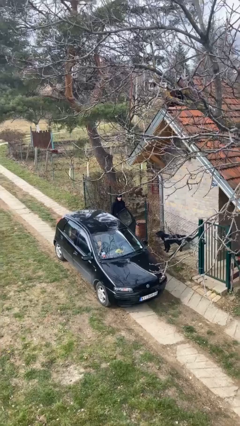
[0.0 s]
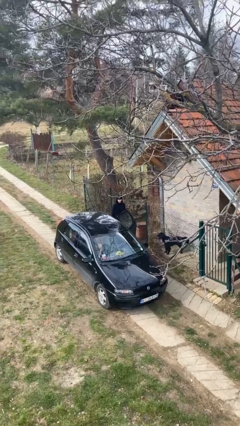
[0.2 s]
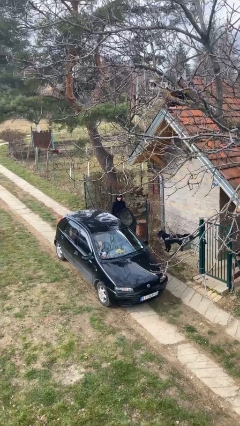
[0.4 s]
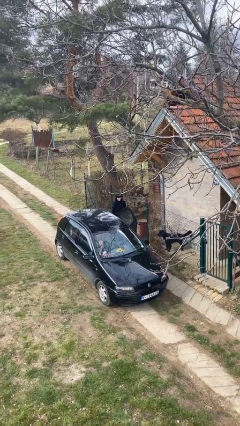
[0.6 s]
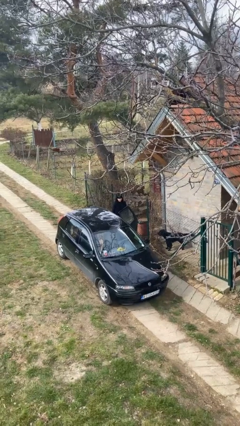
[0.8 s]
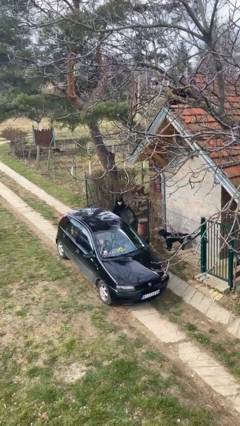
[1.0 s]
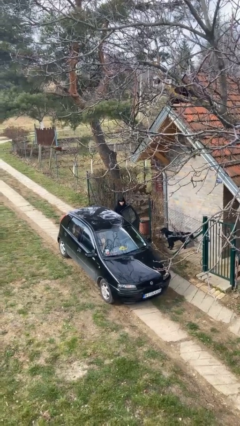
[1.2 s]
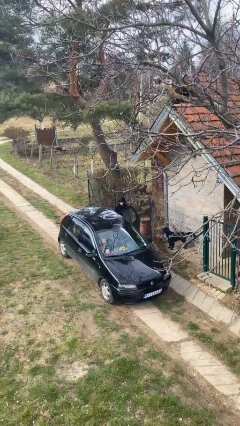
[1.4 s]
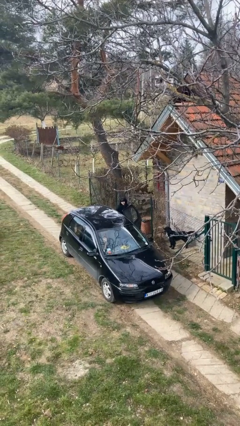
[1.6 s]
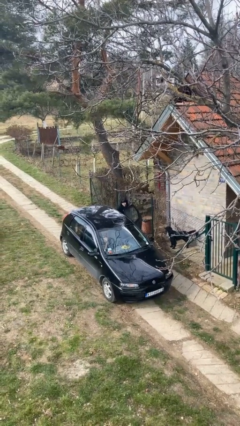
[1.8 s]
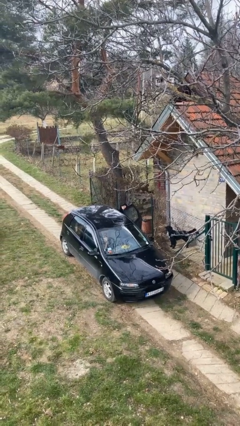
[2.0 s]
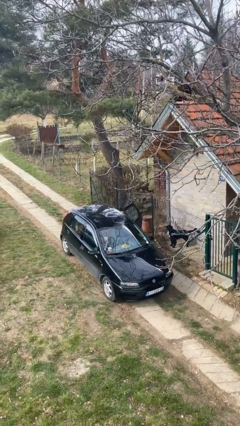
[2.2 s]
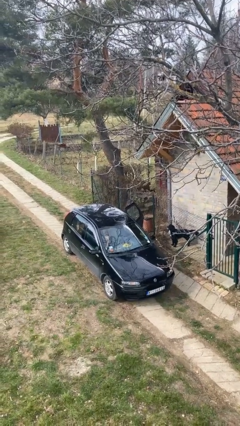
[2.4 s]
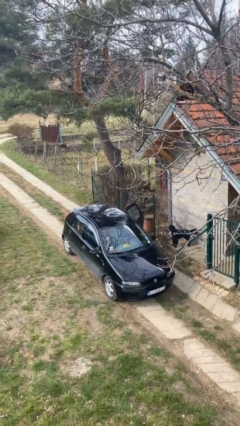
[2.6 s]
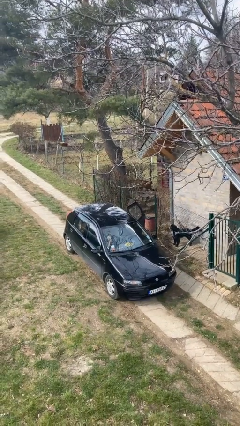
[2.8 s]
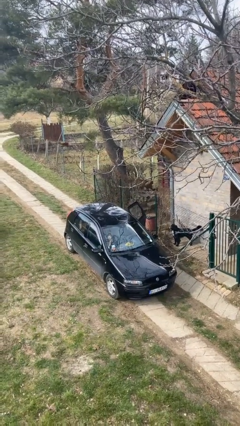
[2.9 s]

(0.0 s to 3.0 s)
person enters car

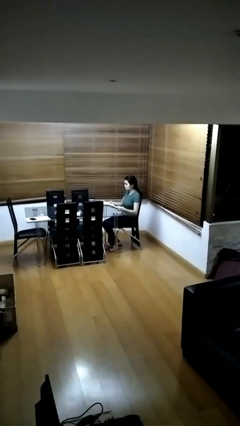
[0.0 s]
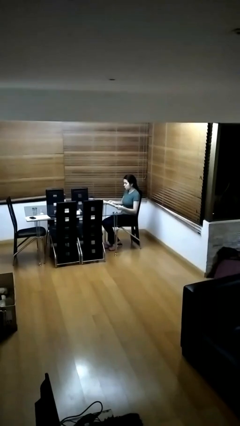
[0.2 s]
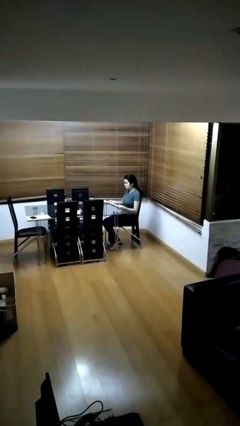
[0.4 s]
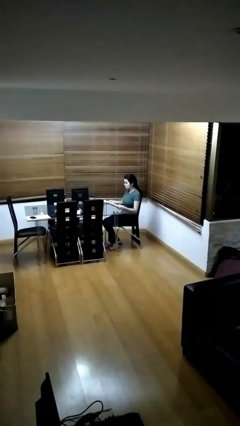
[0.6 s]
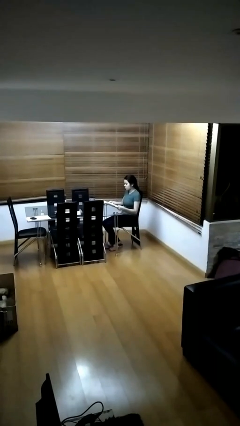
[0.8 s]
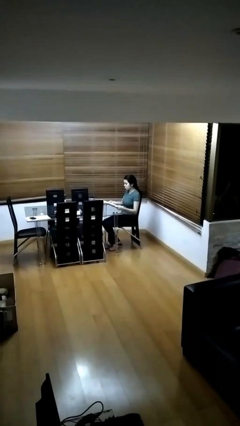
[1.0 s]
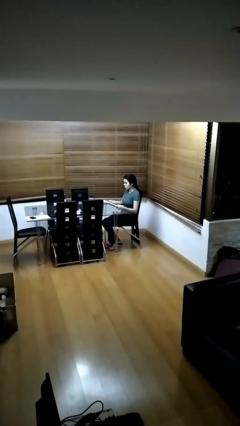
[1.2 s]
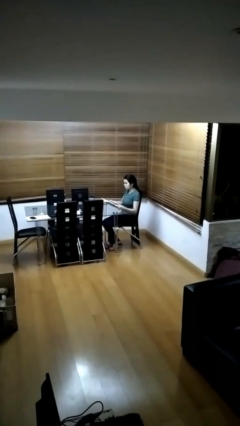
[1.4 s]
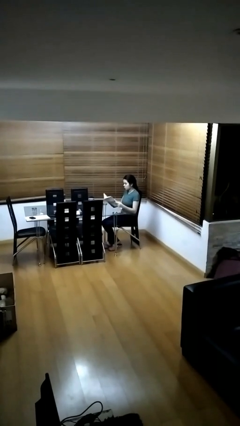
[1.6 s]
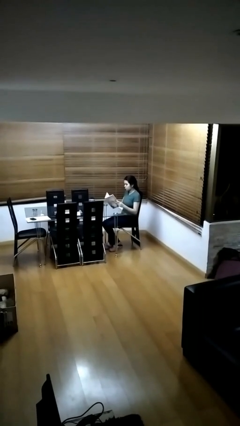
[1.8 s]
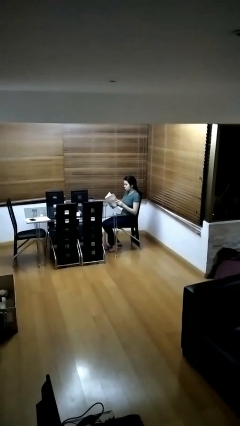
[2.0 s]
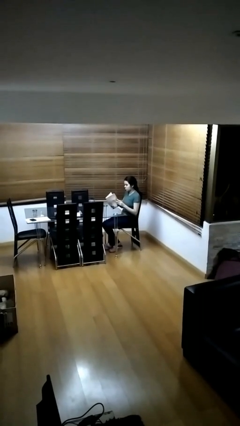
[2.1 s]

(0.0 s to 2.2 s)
person reads document

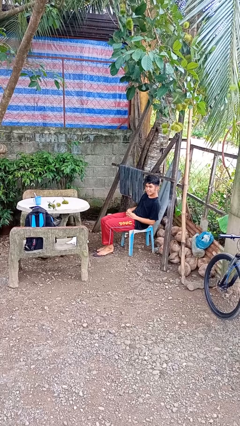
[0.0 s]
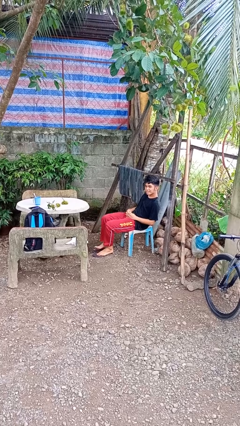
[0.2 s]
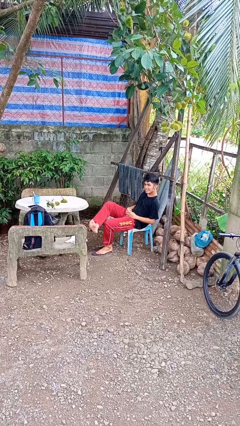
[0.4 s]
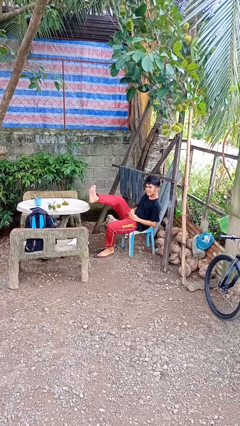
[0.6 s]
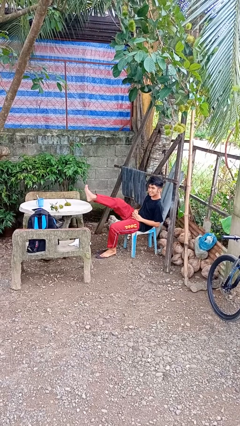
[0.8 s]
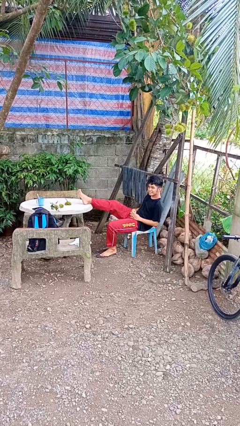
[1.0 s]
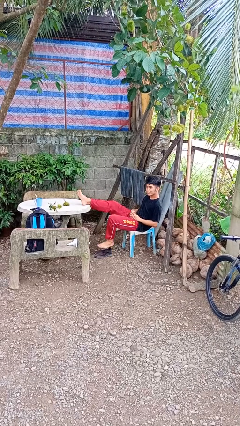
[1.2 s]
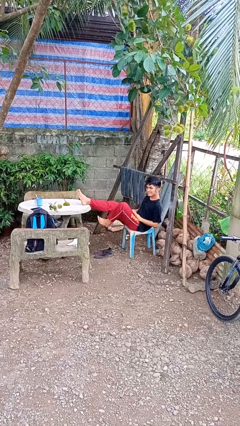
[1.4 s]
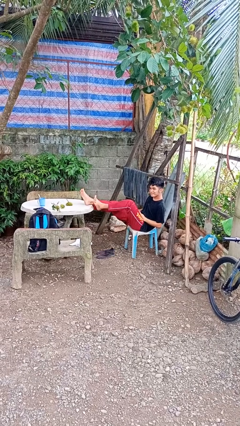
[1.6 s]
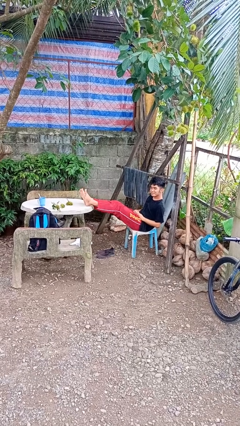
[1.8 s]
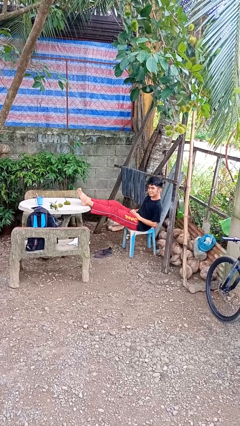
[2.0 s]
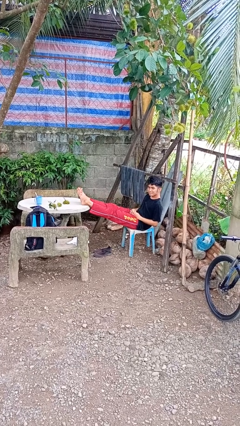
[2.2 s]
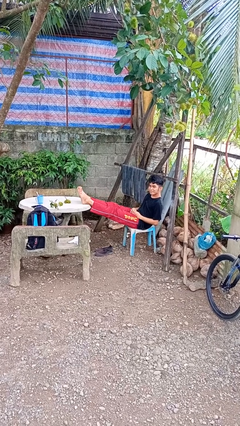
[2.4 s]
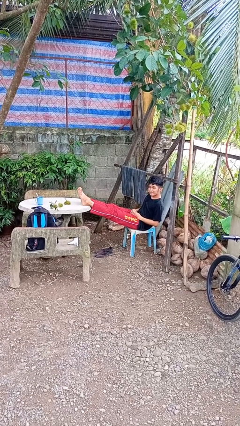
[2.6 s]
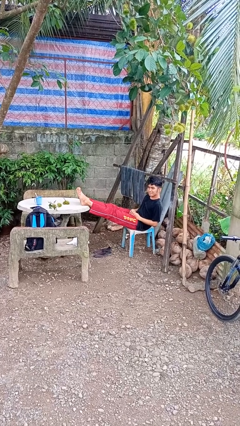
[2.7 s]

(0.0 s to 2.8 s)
person puts feet up

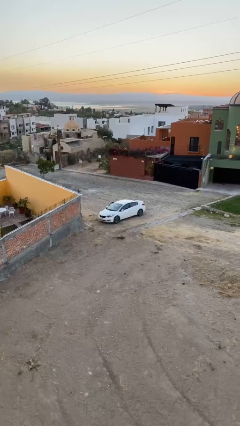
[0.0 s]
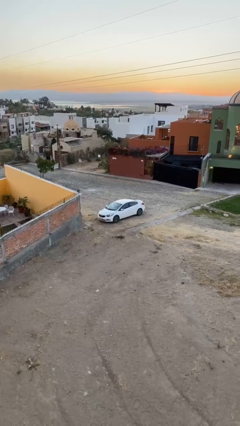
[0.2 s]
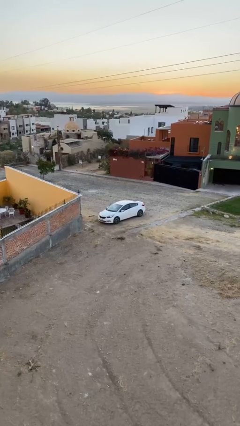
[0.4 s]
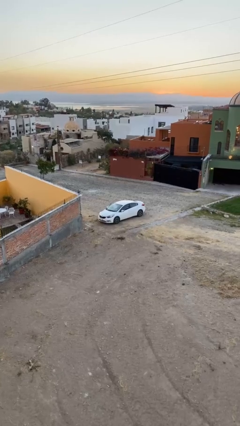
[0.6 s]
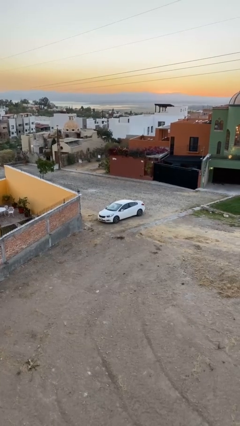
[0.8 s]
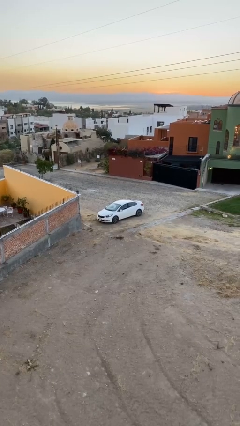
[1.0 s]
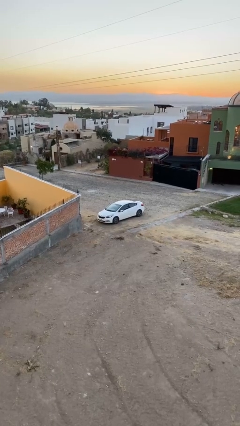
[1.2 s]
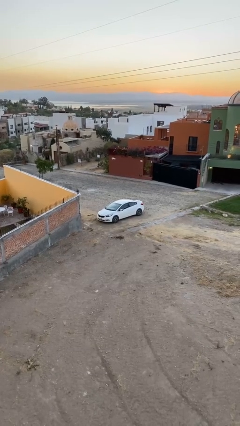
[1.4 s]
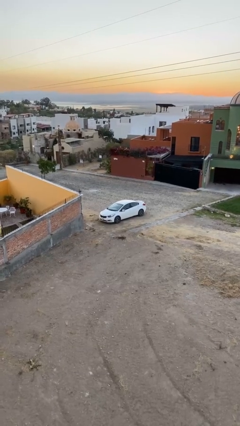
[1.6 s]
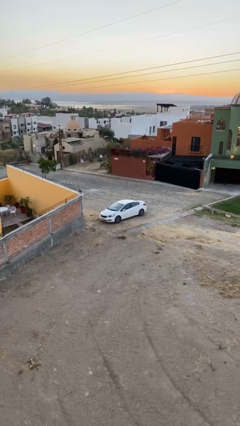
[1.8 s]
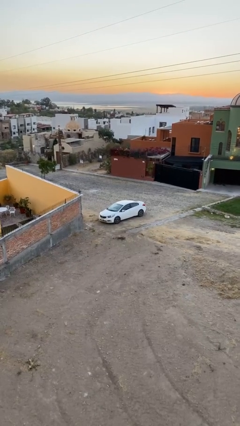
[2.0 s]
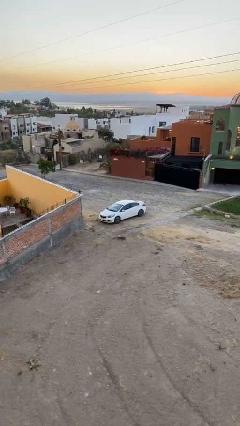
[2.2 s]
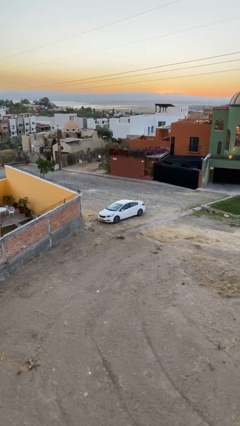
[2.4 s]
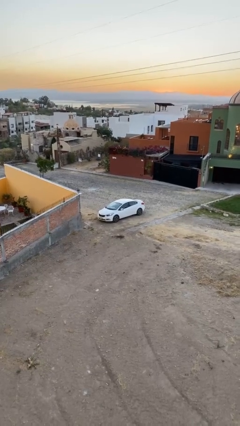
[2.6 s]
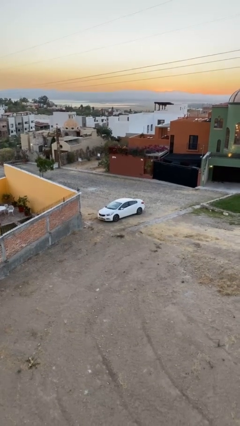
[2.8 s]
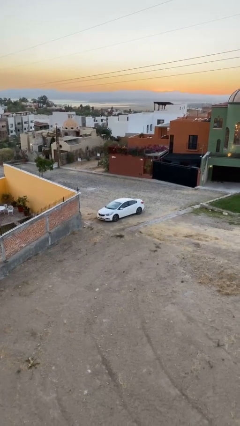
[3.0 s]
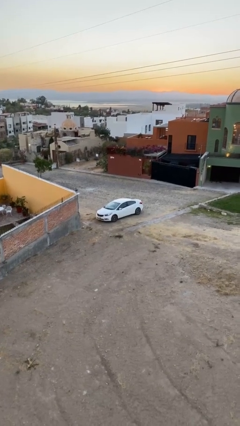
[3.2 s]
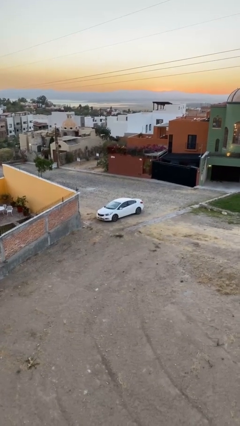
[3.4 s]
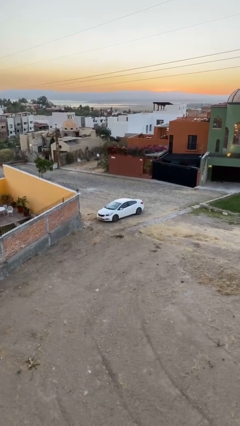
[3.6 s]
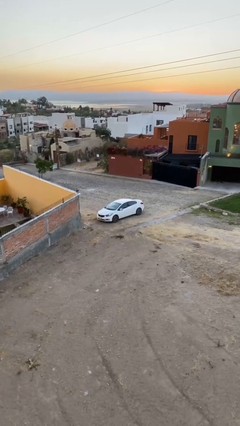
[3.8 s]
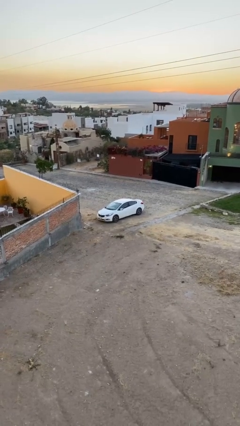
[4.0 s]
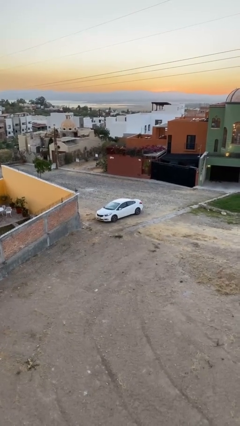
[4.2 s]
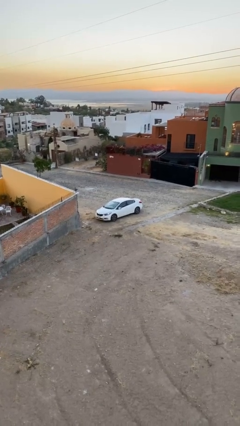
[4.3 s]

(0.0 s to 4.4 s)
car picks up person

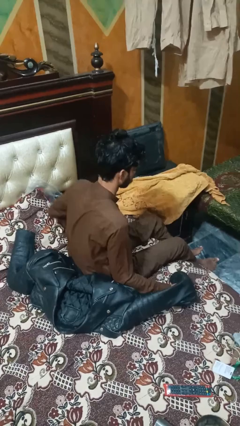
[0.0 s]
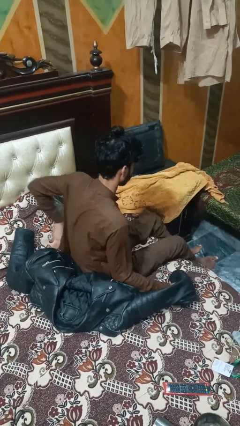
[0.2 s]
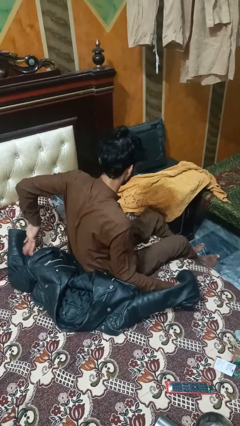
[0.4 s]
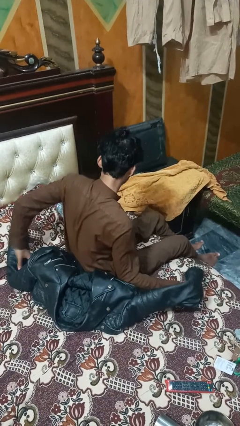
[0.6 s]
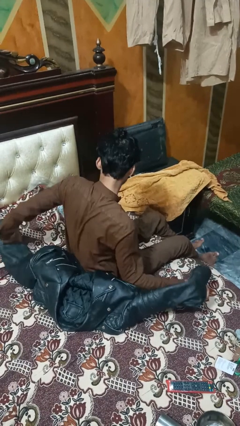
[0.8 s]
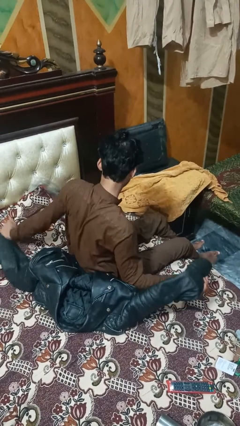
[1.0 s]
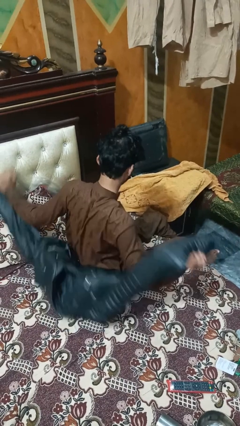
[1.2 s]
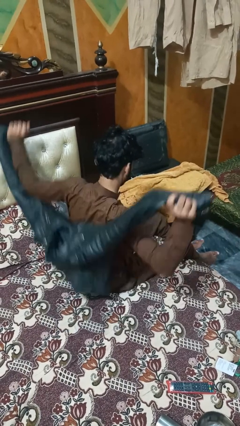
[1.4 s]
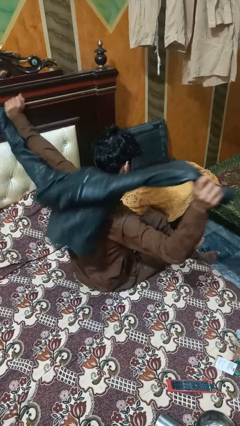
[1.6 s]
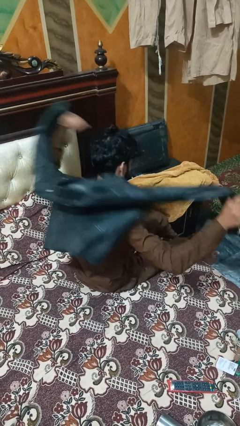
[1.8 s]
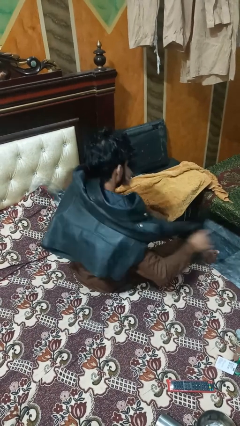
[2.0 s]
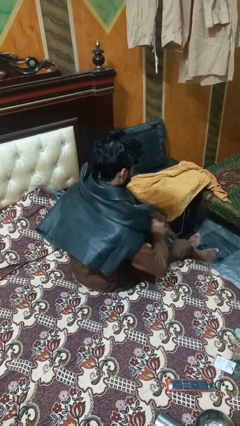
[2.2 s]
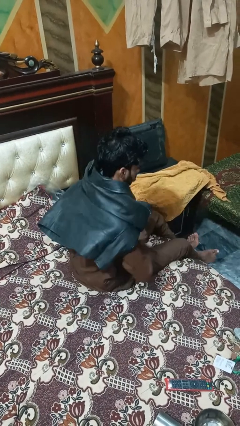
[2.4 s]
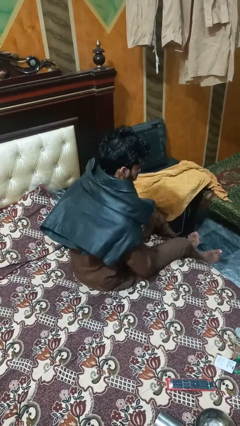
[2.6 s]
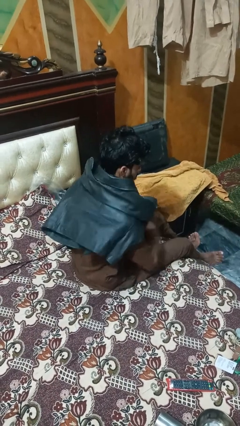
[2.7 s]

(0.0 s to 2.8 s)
person ties jacket around waist

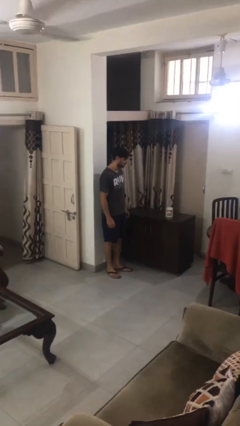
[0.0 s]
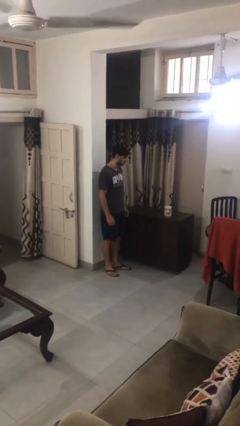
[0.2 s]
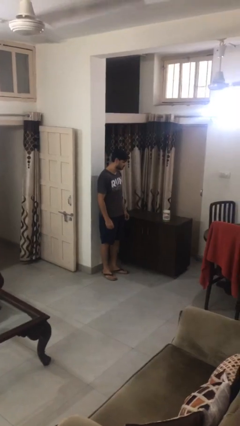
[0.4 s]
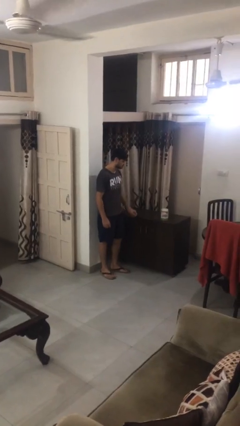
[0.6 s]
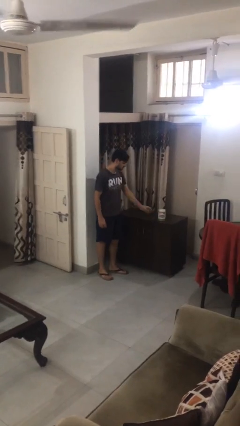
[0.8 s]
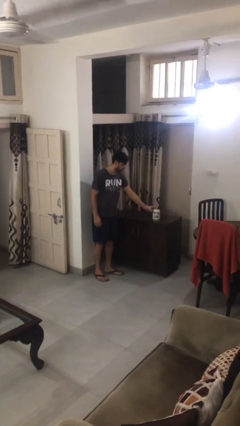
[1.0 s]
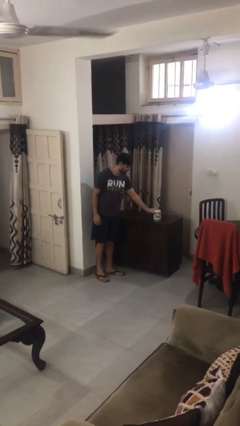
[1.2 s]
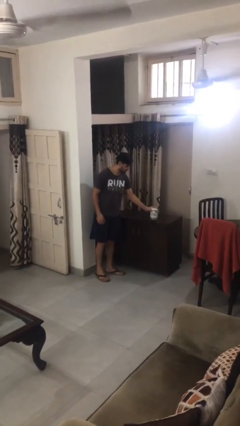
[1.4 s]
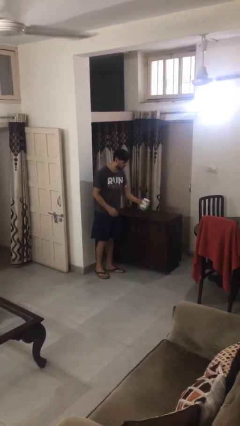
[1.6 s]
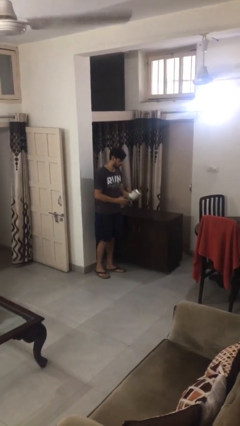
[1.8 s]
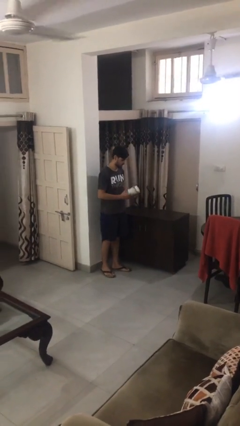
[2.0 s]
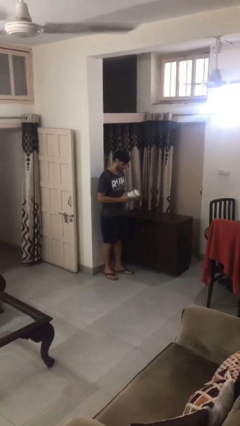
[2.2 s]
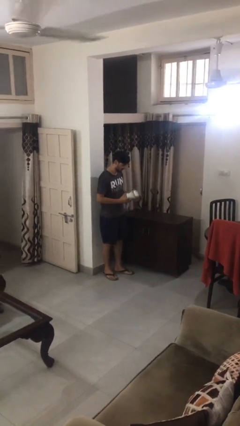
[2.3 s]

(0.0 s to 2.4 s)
person picks up object from countertop
